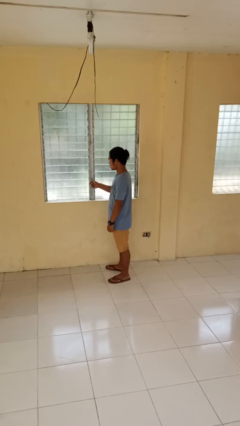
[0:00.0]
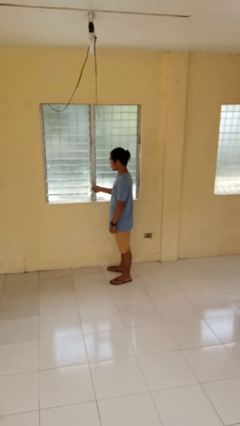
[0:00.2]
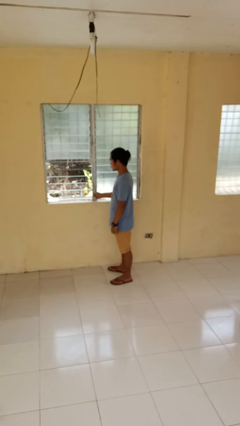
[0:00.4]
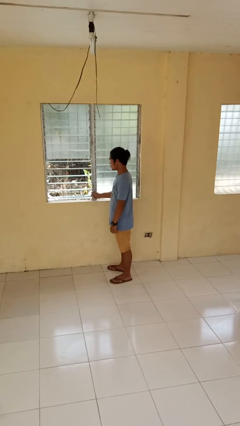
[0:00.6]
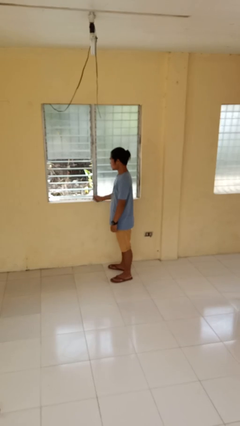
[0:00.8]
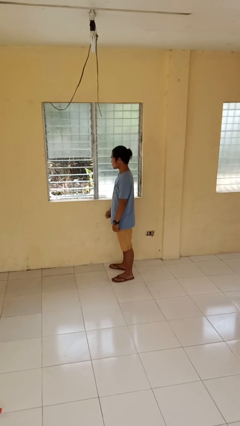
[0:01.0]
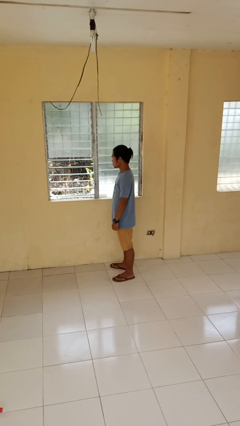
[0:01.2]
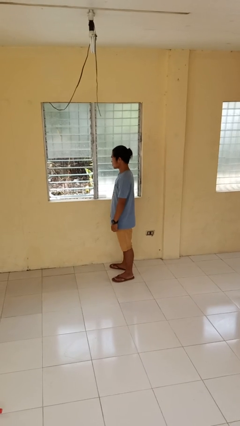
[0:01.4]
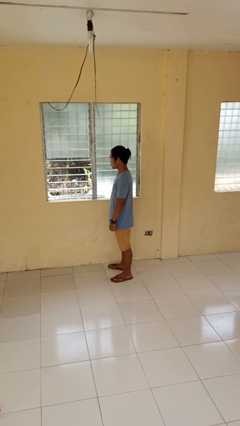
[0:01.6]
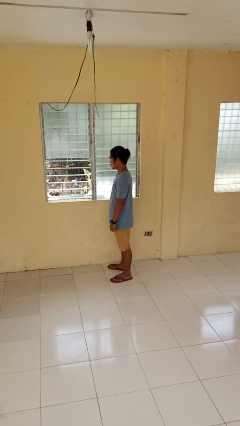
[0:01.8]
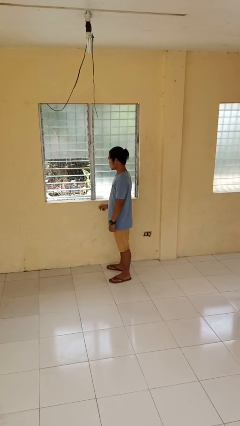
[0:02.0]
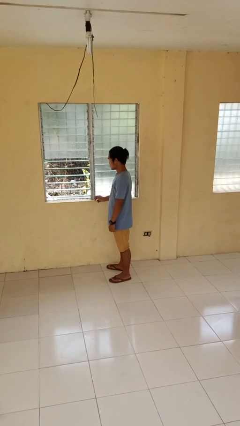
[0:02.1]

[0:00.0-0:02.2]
person opens home window

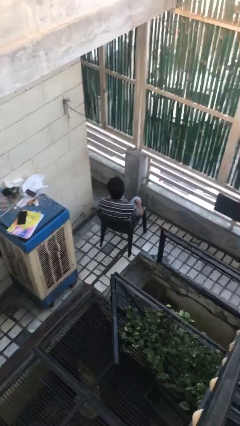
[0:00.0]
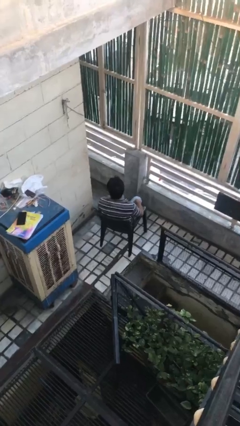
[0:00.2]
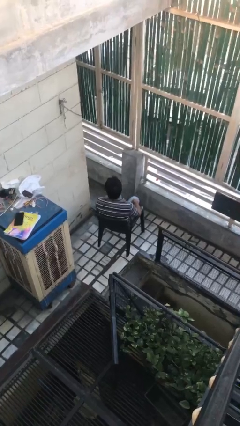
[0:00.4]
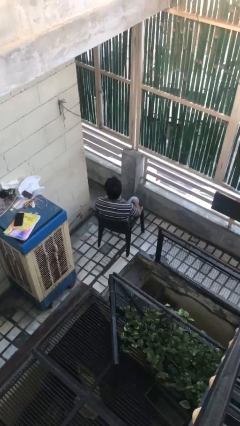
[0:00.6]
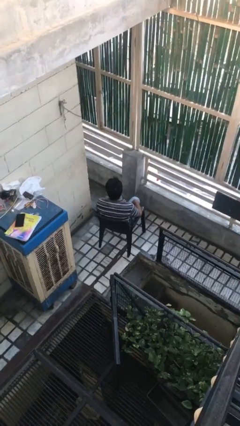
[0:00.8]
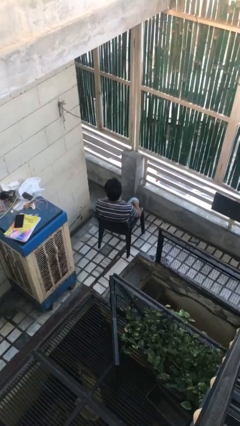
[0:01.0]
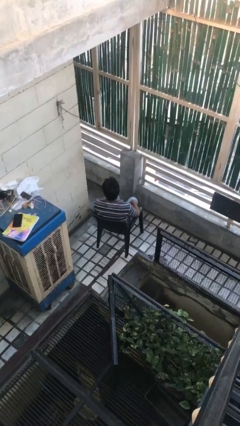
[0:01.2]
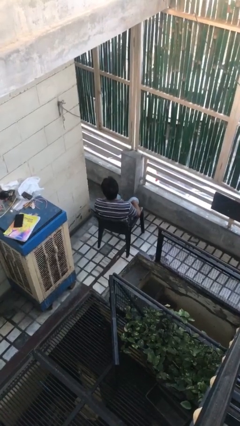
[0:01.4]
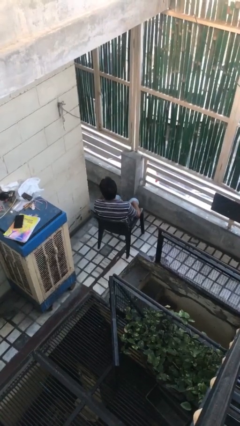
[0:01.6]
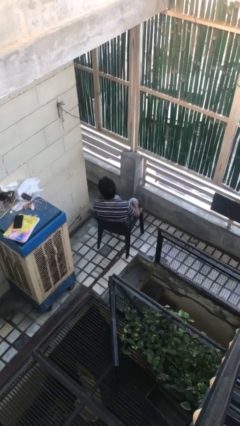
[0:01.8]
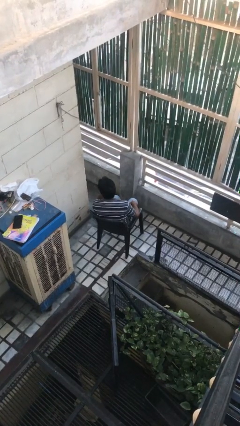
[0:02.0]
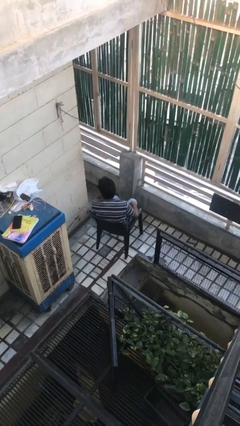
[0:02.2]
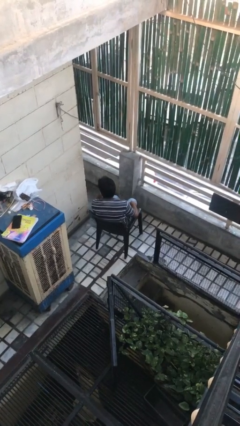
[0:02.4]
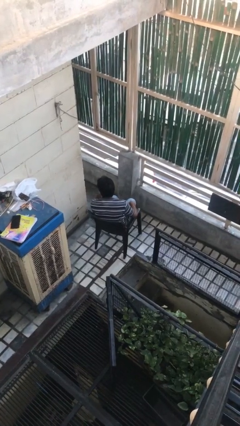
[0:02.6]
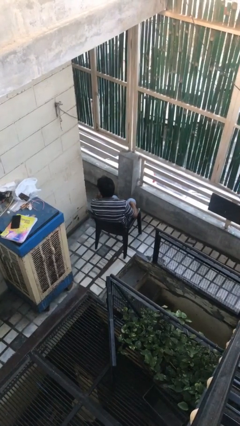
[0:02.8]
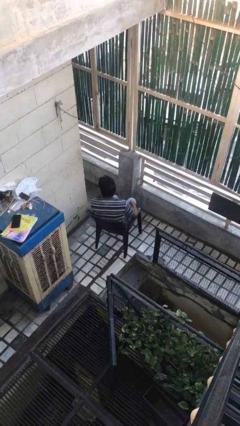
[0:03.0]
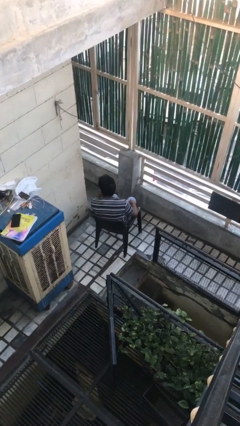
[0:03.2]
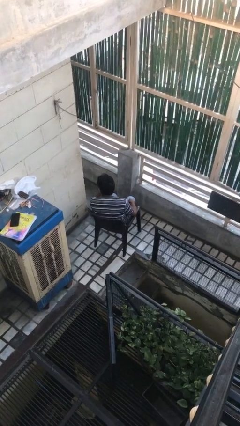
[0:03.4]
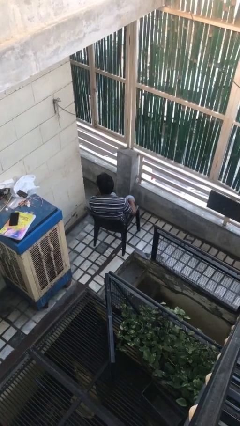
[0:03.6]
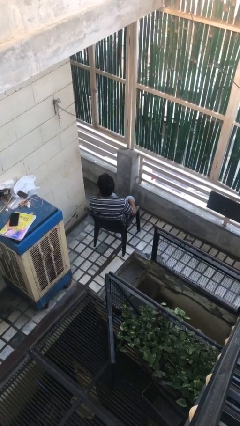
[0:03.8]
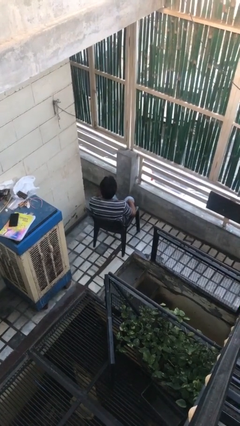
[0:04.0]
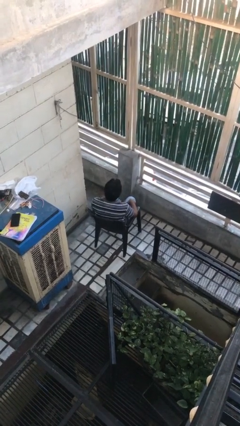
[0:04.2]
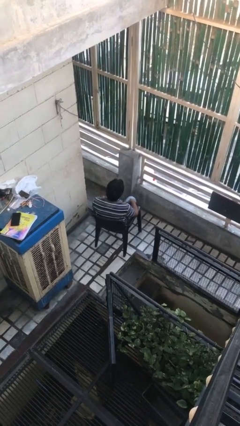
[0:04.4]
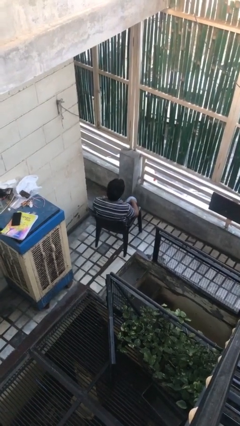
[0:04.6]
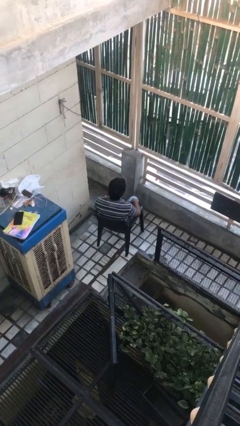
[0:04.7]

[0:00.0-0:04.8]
person strokes chin

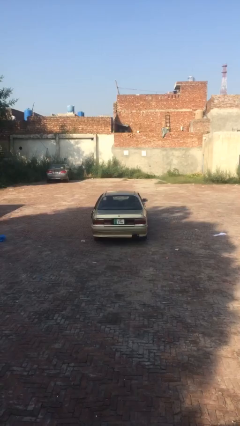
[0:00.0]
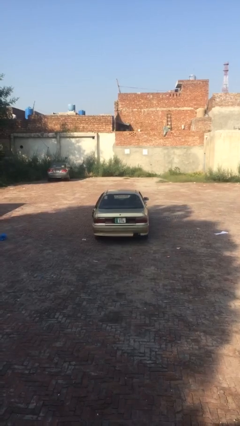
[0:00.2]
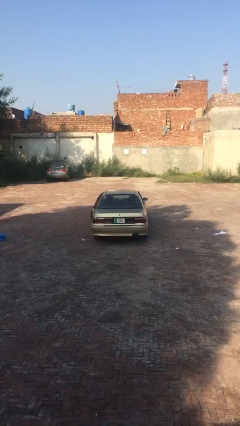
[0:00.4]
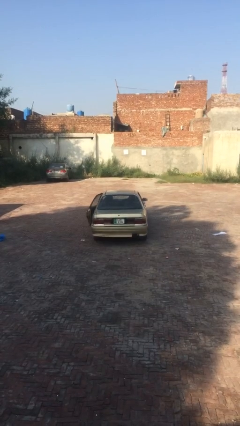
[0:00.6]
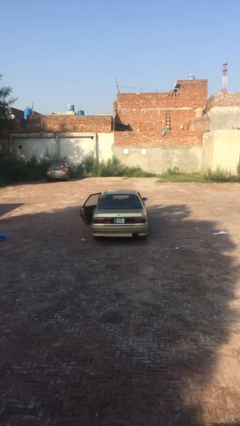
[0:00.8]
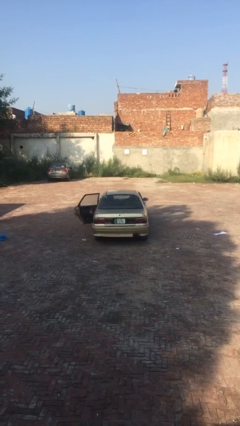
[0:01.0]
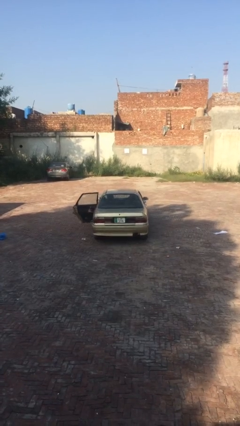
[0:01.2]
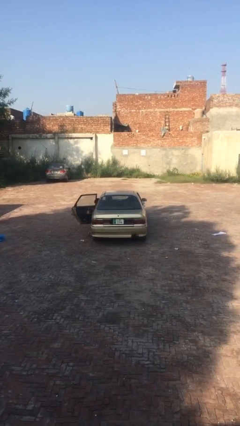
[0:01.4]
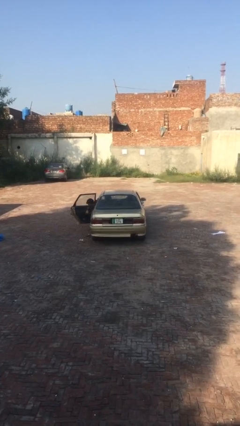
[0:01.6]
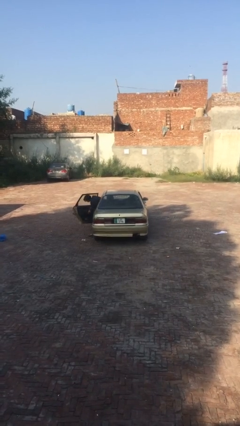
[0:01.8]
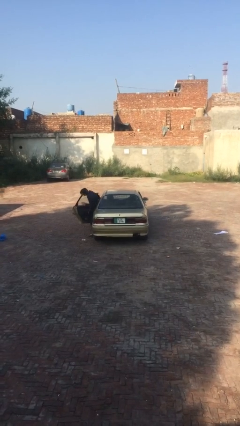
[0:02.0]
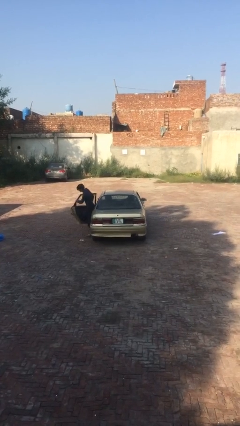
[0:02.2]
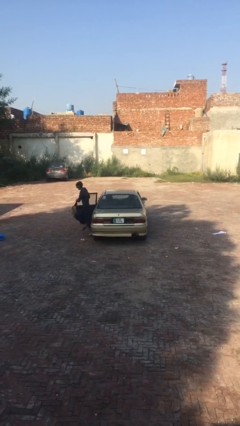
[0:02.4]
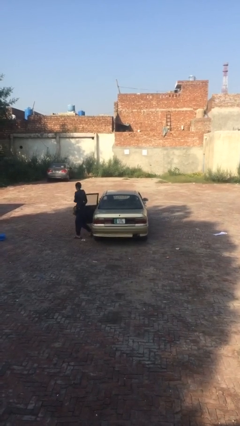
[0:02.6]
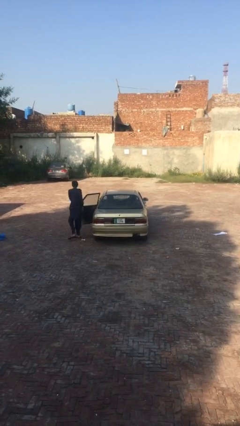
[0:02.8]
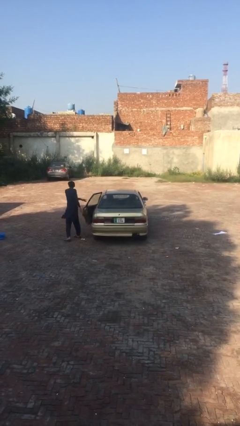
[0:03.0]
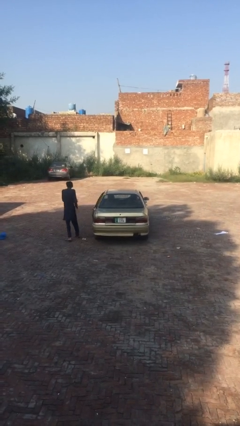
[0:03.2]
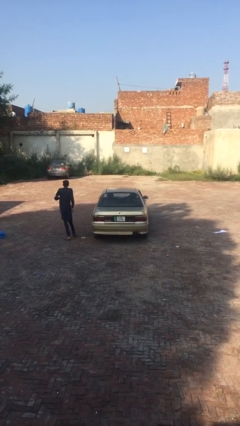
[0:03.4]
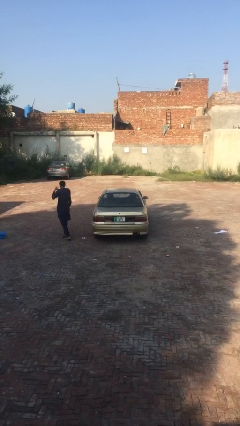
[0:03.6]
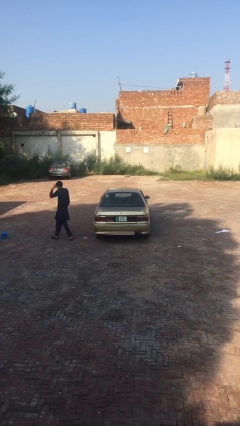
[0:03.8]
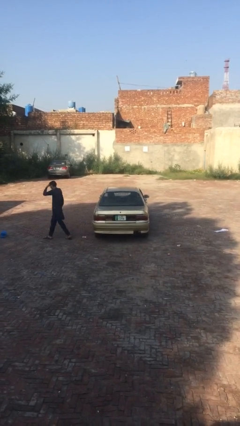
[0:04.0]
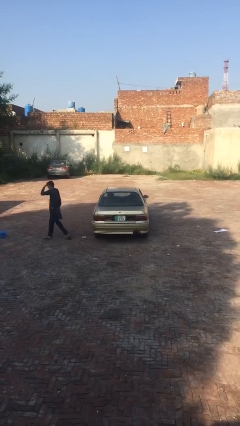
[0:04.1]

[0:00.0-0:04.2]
car drops off person

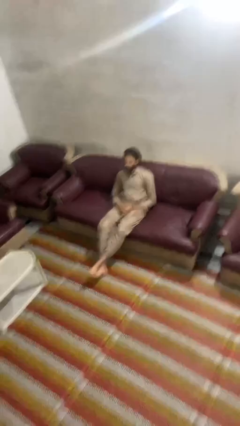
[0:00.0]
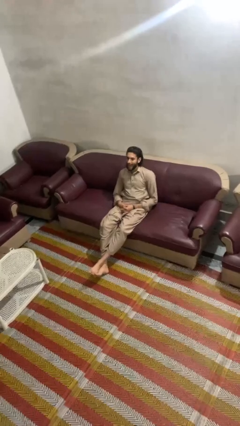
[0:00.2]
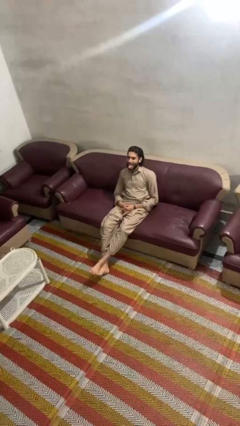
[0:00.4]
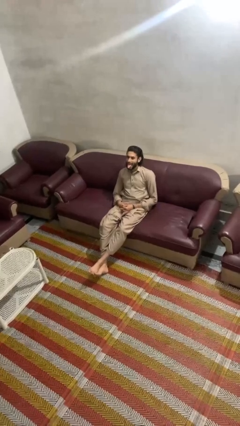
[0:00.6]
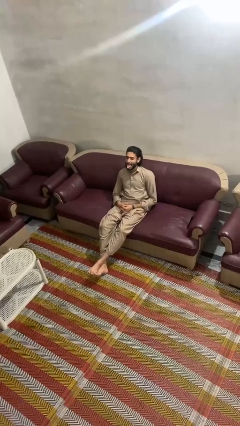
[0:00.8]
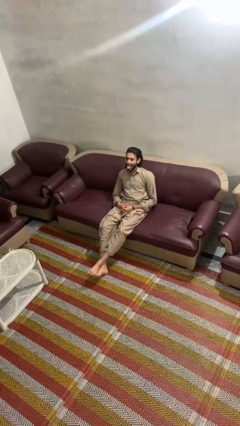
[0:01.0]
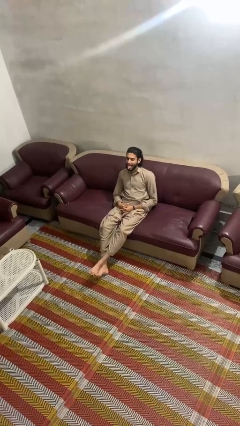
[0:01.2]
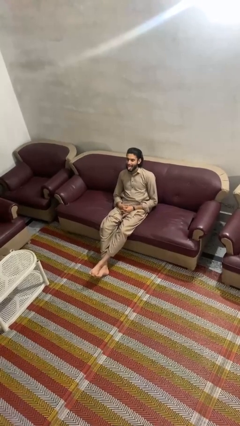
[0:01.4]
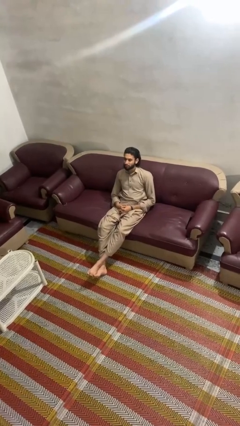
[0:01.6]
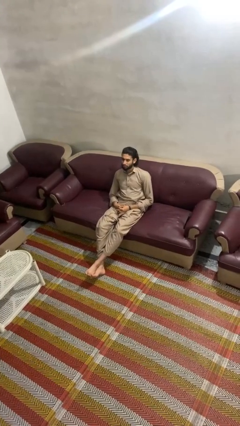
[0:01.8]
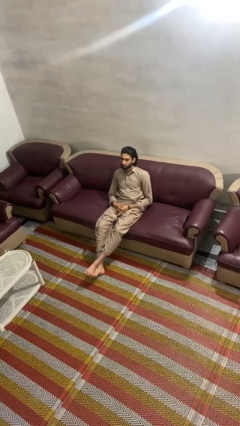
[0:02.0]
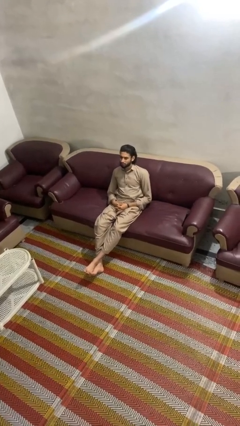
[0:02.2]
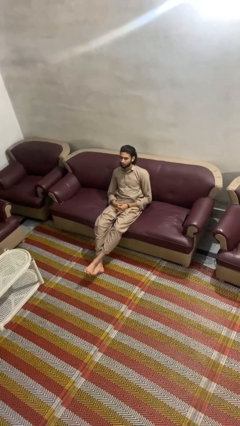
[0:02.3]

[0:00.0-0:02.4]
person sticks out tongue

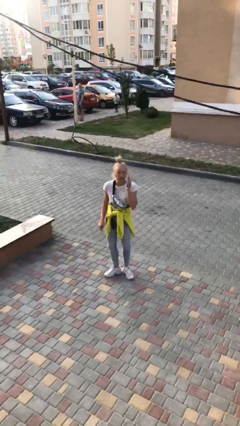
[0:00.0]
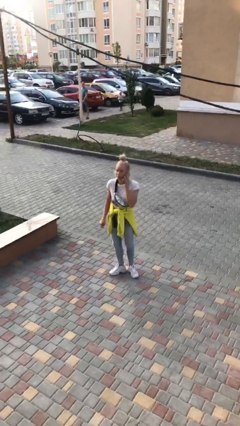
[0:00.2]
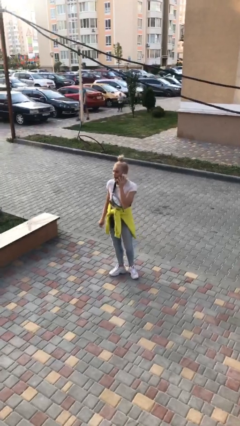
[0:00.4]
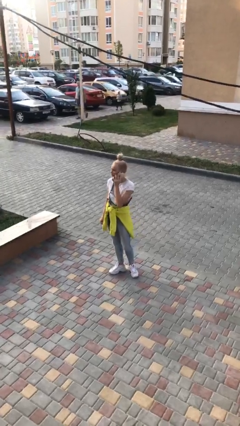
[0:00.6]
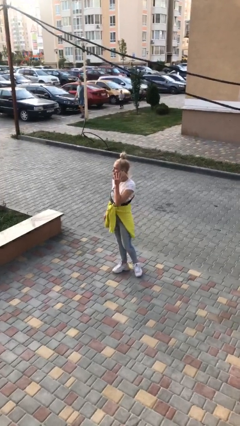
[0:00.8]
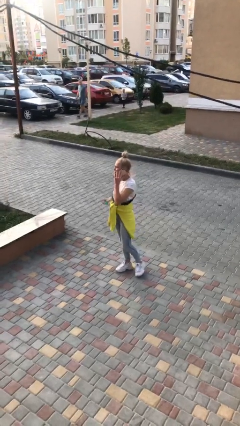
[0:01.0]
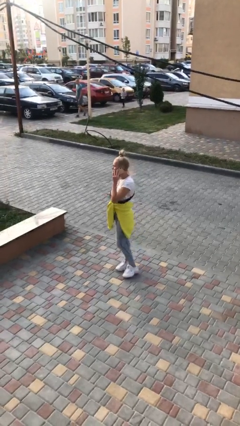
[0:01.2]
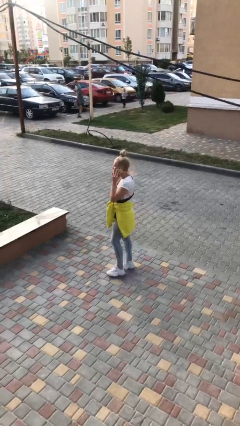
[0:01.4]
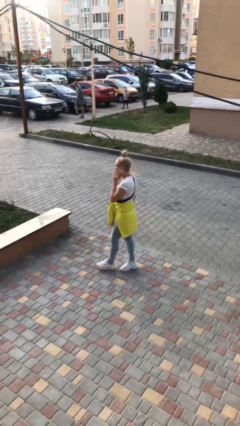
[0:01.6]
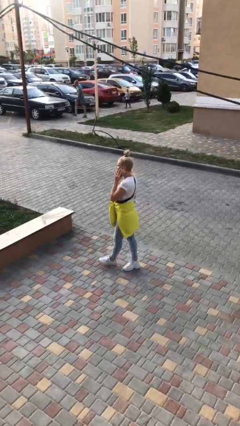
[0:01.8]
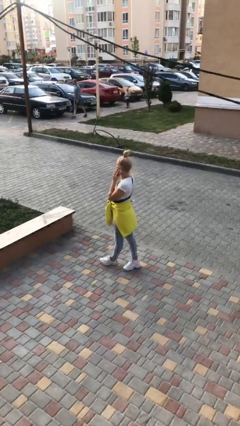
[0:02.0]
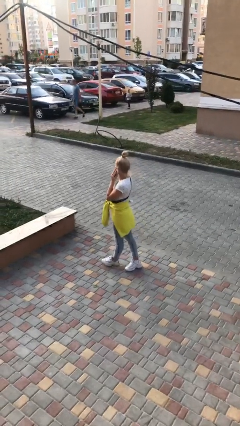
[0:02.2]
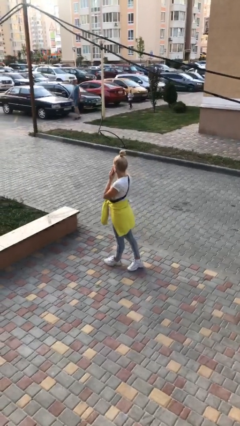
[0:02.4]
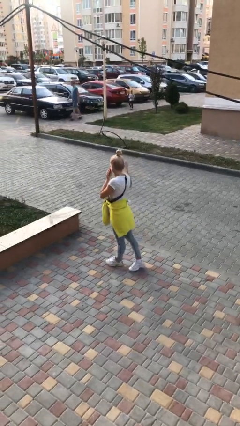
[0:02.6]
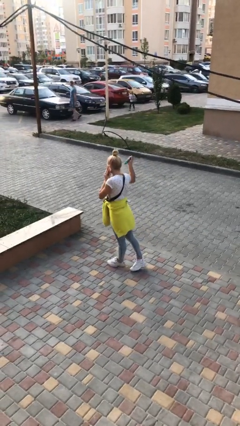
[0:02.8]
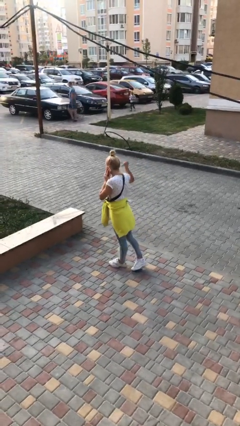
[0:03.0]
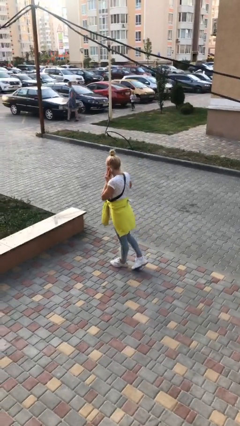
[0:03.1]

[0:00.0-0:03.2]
person talks on phone

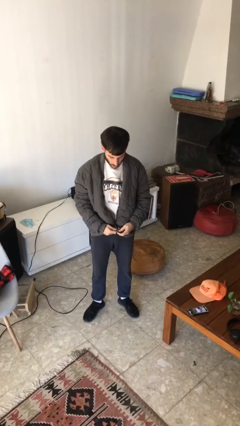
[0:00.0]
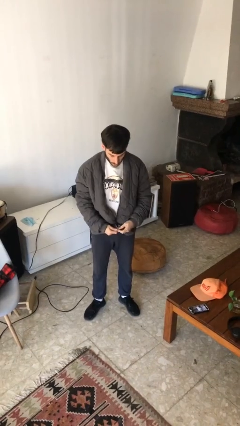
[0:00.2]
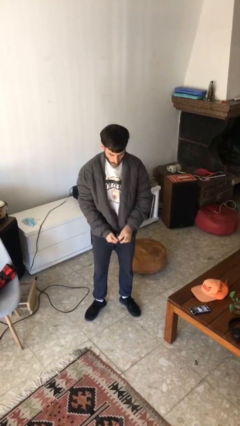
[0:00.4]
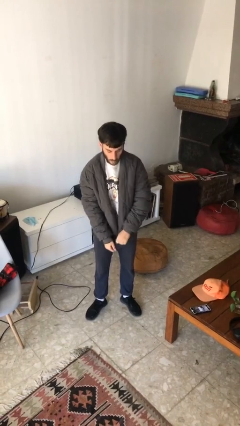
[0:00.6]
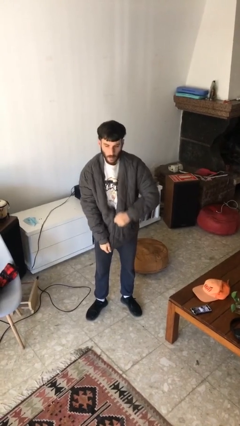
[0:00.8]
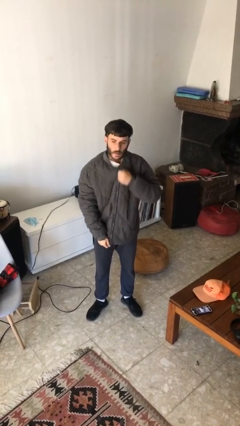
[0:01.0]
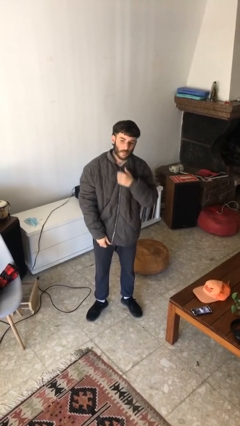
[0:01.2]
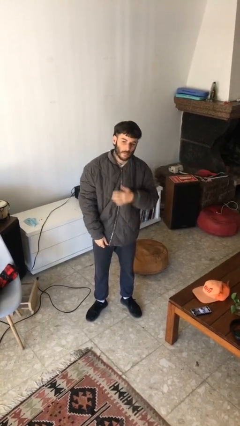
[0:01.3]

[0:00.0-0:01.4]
person zips up jacket
